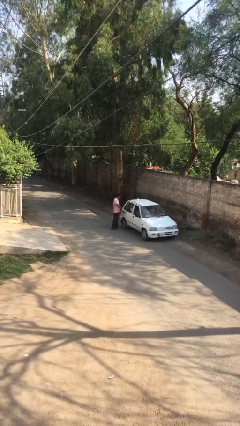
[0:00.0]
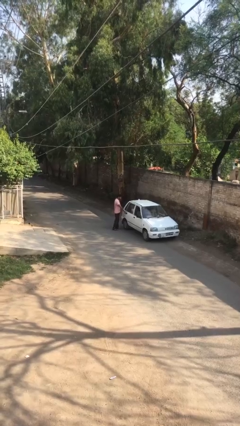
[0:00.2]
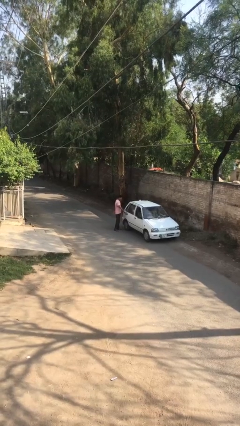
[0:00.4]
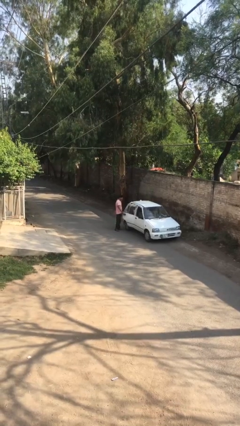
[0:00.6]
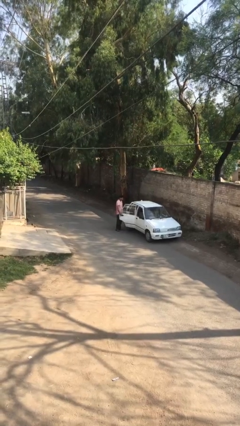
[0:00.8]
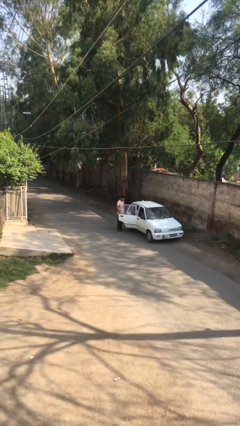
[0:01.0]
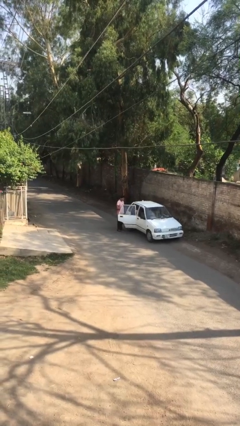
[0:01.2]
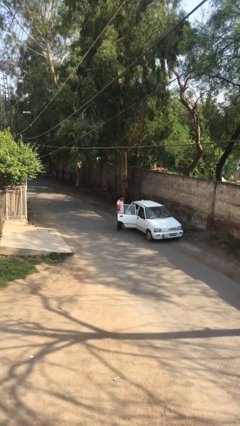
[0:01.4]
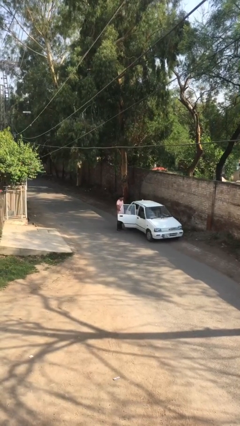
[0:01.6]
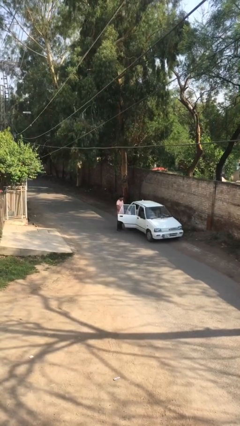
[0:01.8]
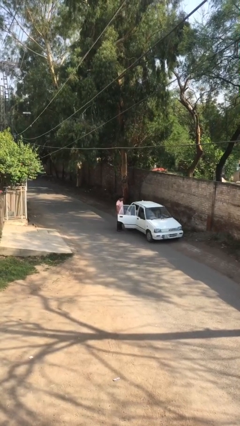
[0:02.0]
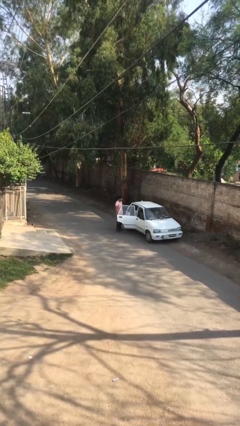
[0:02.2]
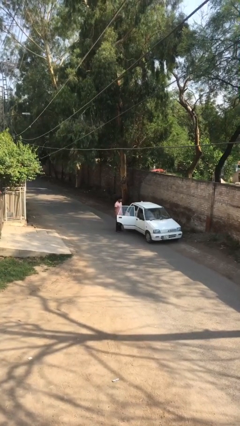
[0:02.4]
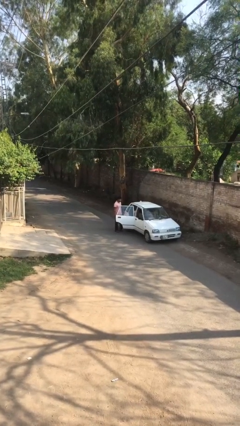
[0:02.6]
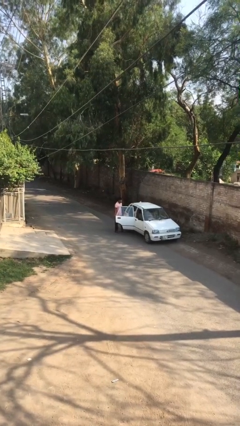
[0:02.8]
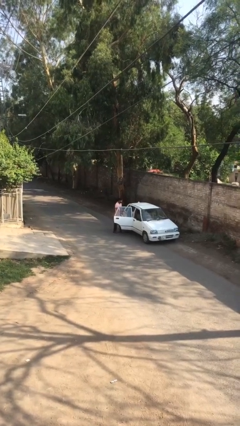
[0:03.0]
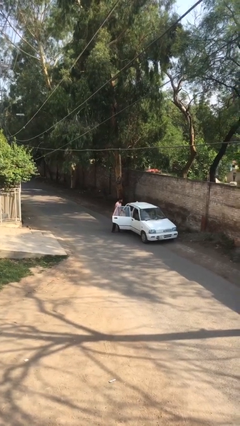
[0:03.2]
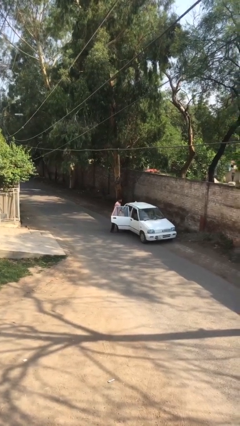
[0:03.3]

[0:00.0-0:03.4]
person opens car door

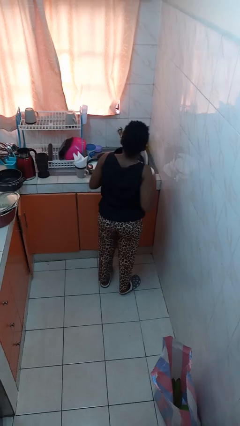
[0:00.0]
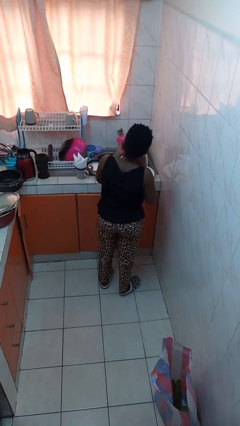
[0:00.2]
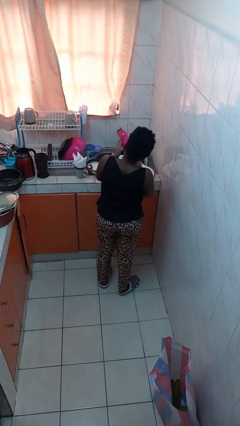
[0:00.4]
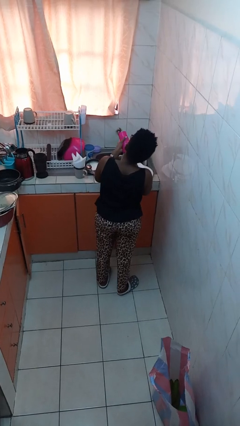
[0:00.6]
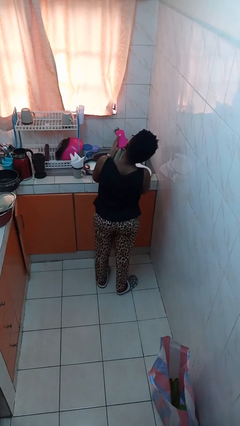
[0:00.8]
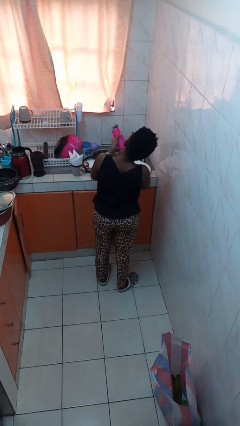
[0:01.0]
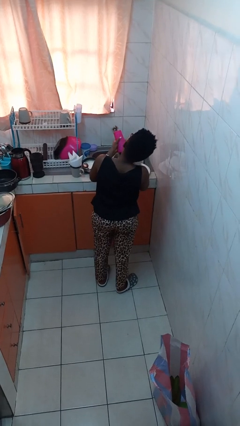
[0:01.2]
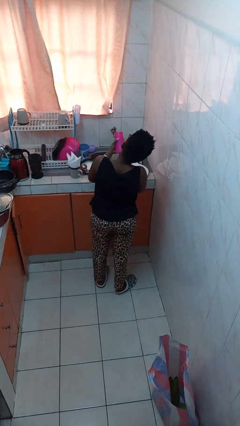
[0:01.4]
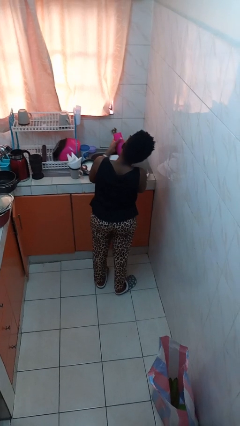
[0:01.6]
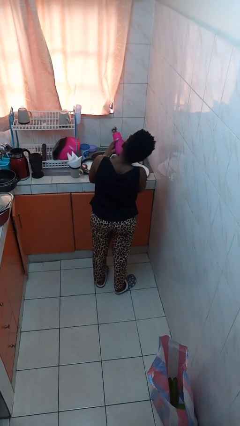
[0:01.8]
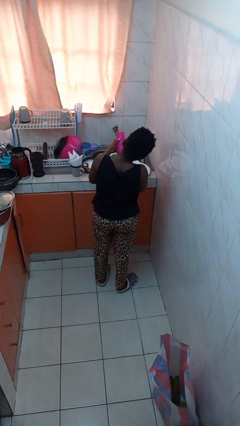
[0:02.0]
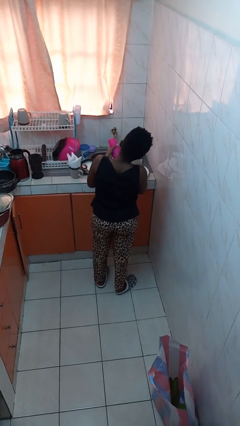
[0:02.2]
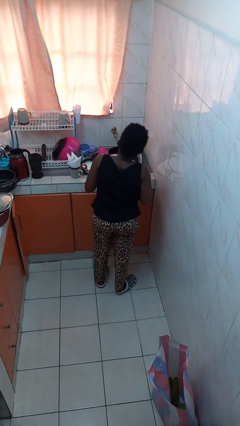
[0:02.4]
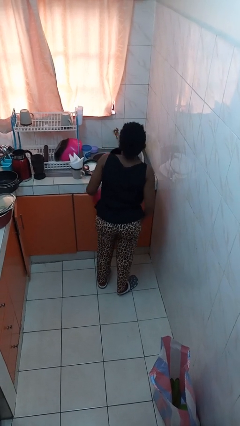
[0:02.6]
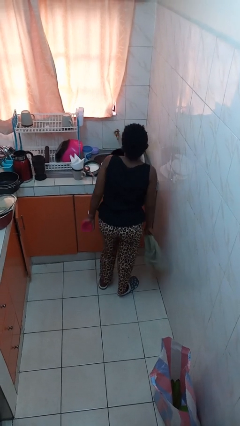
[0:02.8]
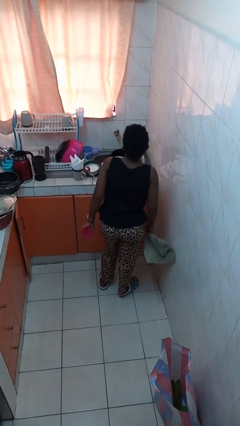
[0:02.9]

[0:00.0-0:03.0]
person dries dish

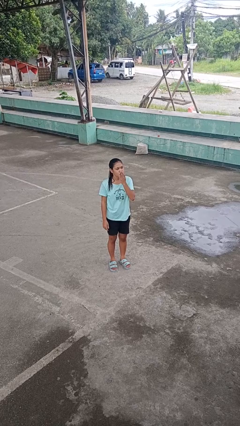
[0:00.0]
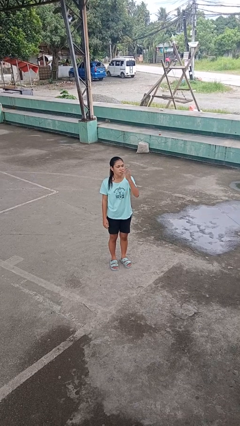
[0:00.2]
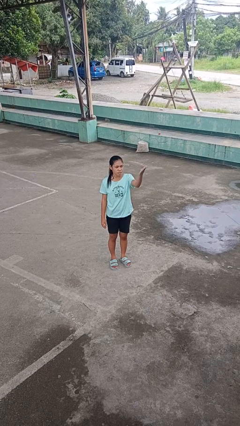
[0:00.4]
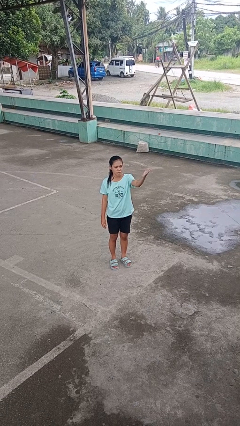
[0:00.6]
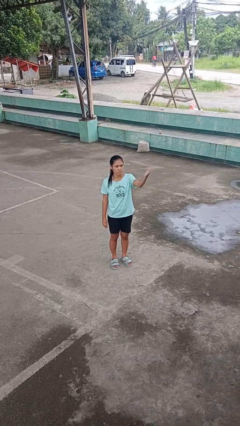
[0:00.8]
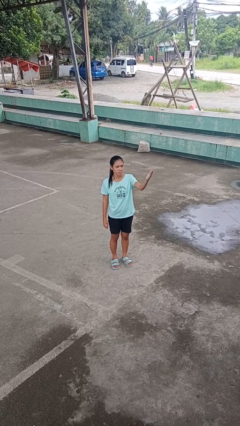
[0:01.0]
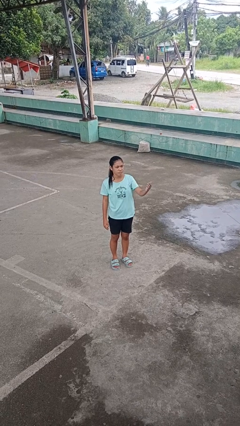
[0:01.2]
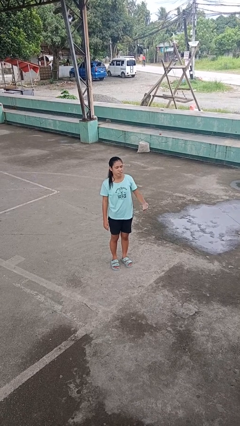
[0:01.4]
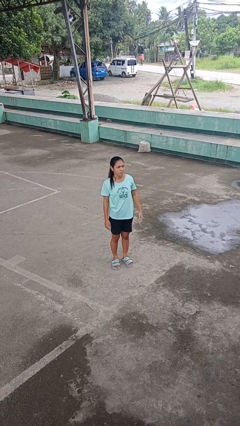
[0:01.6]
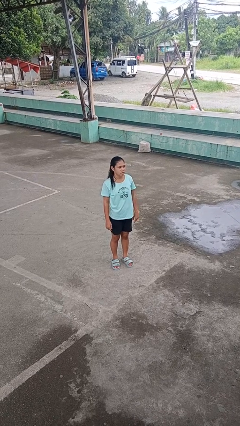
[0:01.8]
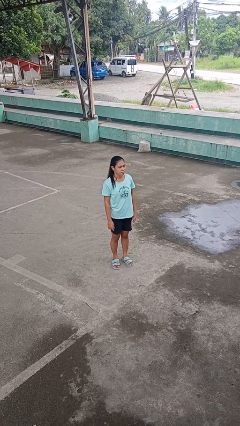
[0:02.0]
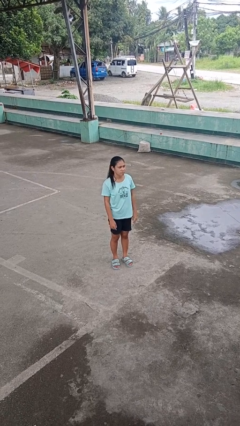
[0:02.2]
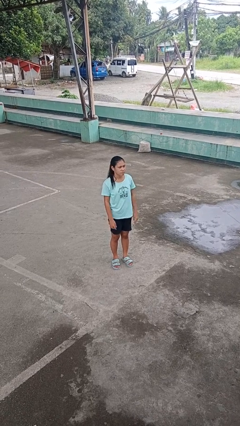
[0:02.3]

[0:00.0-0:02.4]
person gestures blow kiss

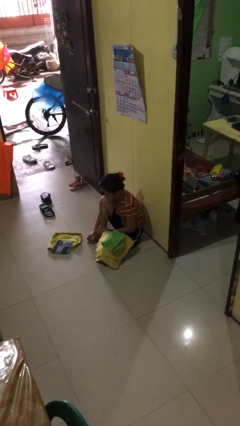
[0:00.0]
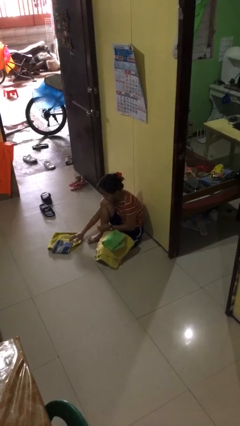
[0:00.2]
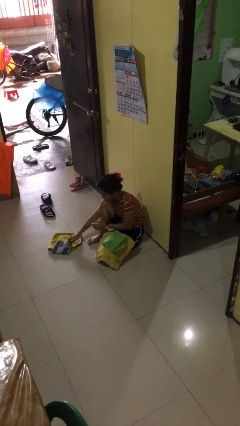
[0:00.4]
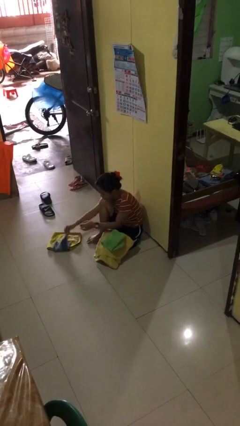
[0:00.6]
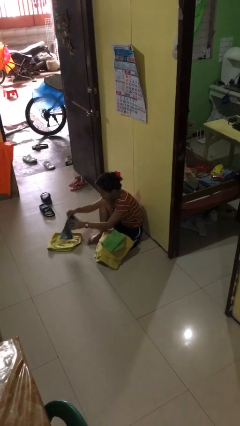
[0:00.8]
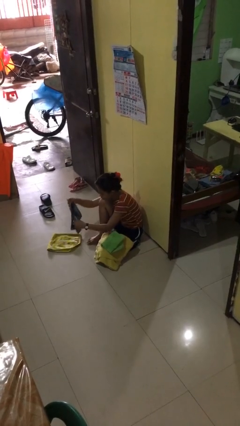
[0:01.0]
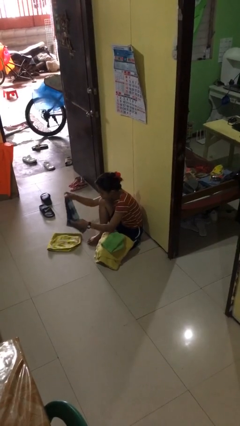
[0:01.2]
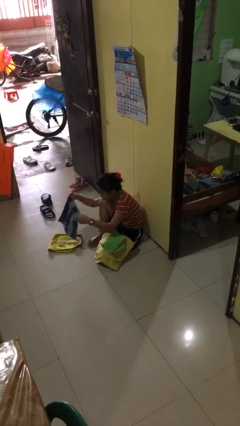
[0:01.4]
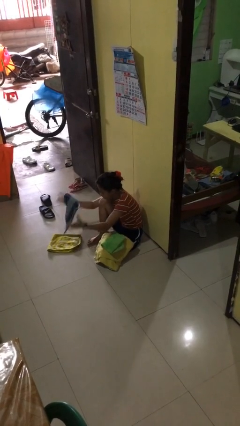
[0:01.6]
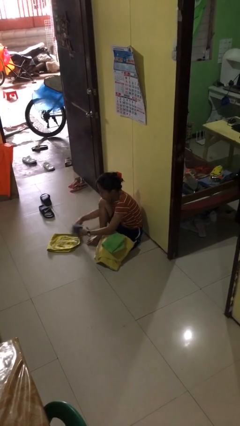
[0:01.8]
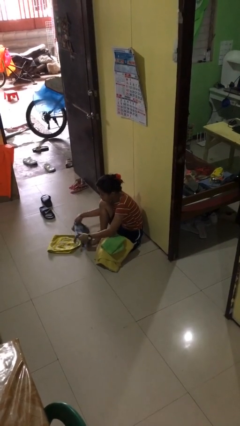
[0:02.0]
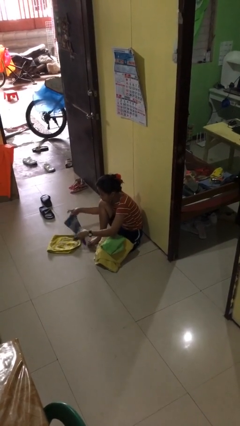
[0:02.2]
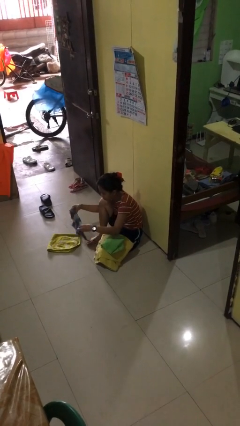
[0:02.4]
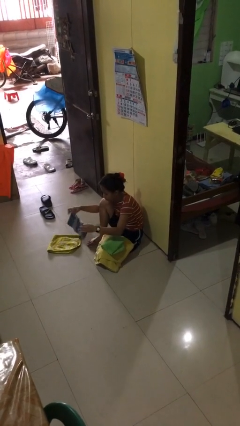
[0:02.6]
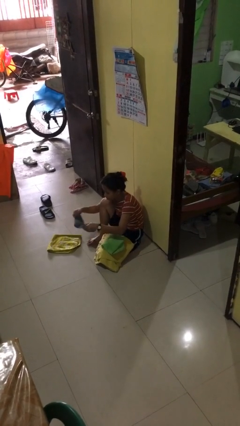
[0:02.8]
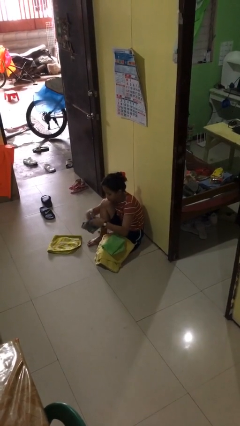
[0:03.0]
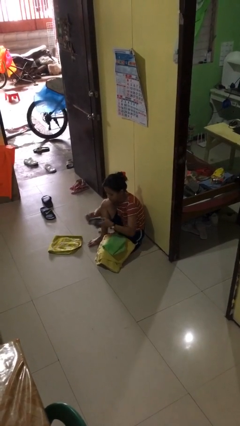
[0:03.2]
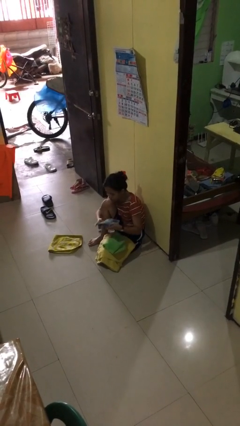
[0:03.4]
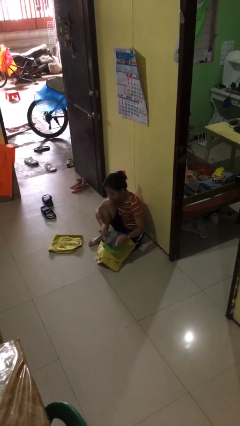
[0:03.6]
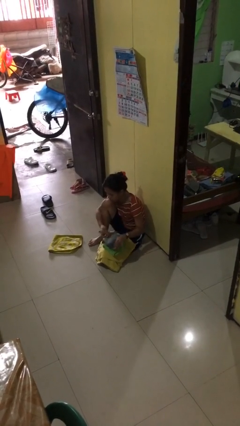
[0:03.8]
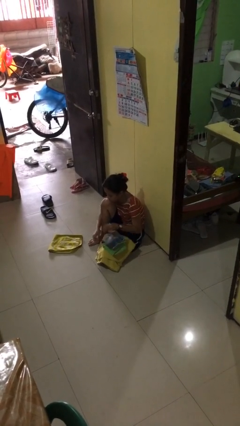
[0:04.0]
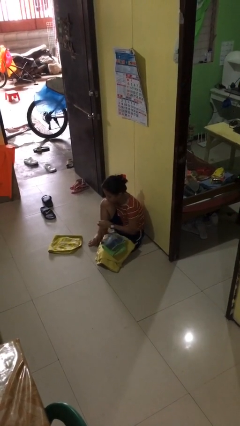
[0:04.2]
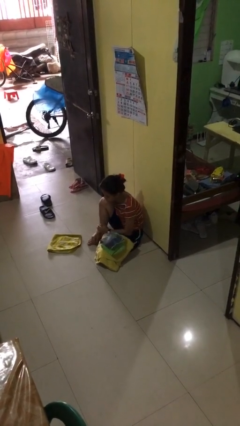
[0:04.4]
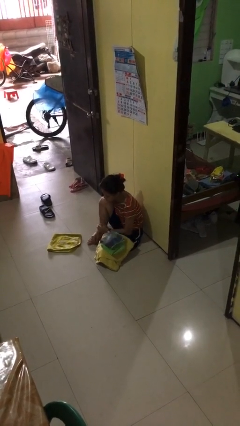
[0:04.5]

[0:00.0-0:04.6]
person folds towel

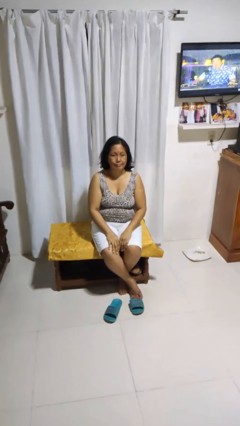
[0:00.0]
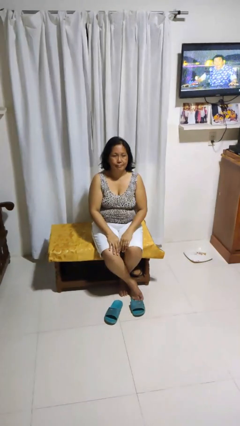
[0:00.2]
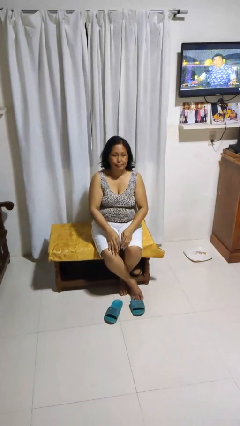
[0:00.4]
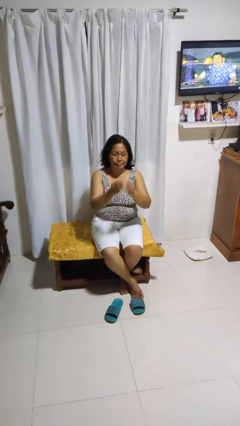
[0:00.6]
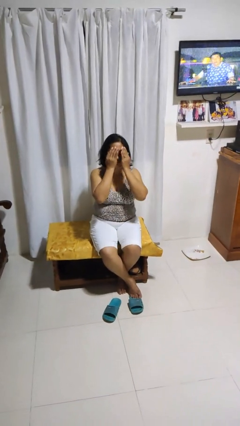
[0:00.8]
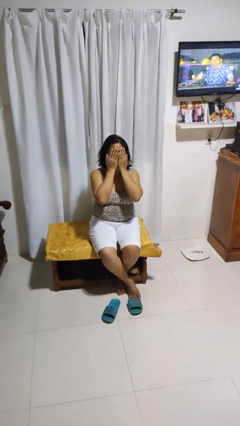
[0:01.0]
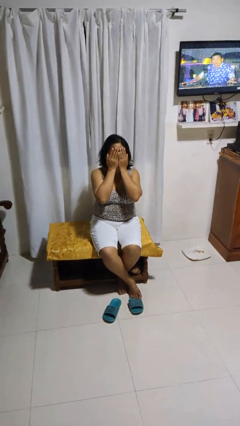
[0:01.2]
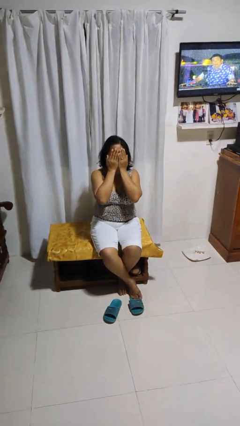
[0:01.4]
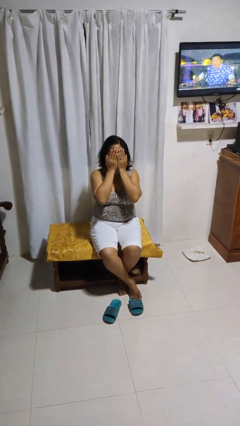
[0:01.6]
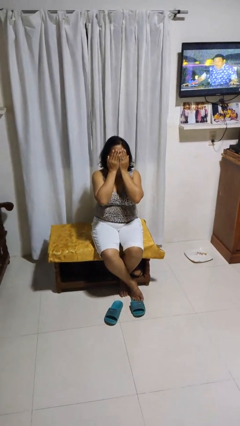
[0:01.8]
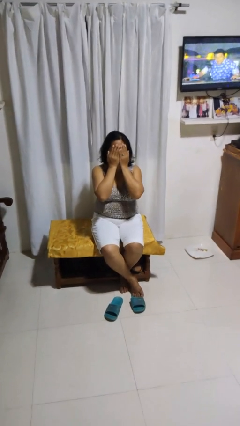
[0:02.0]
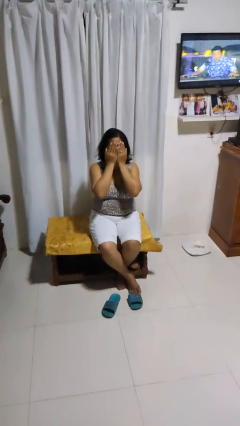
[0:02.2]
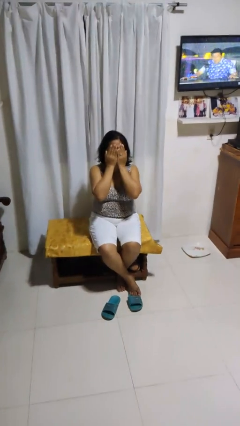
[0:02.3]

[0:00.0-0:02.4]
person covers face with hands

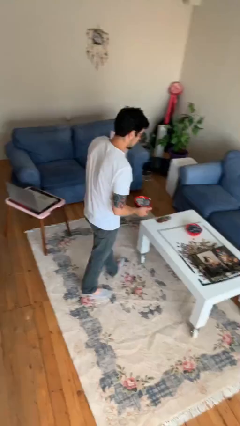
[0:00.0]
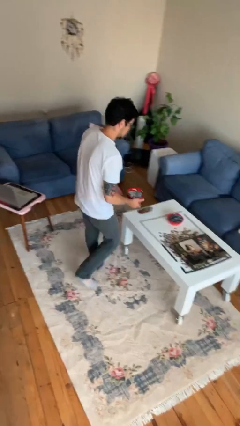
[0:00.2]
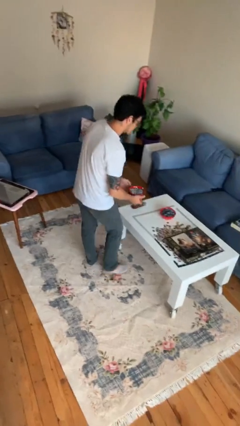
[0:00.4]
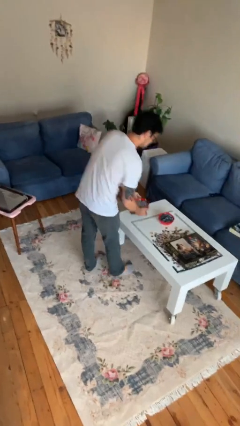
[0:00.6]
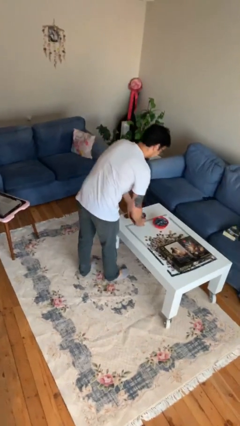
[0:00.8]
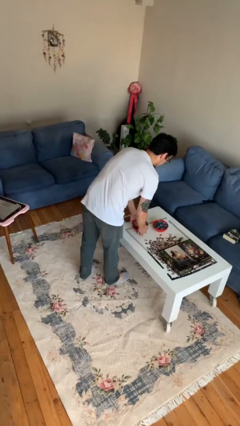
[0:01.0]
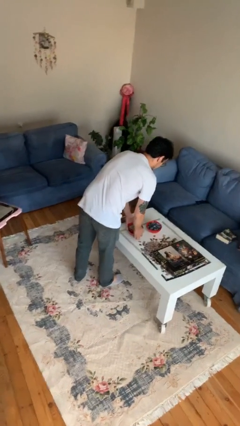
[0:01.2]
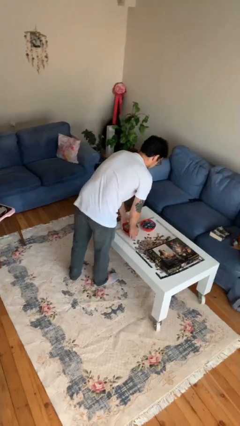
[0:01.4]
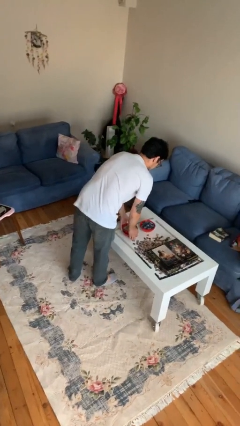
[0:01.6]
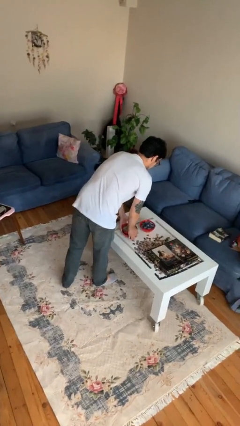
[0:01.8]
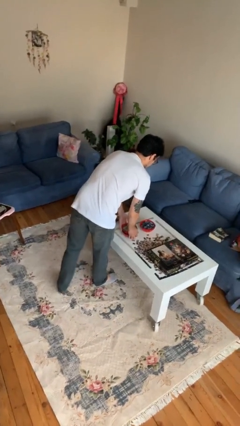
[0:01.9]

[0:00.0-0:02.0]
person puts down object on table
